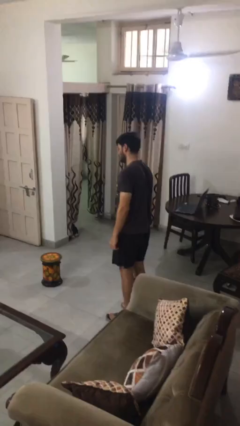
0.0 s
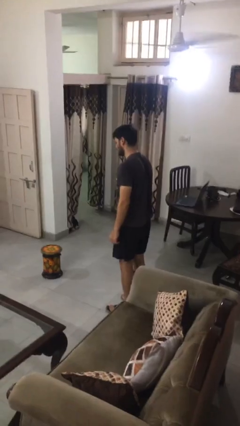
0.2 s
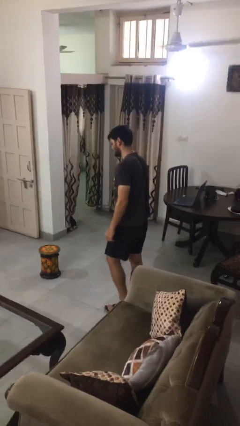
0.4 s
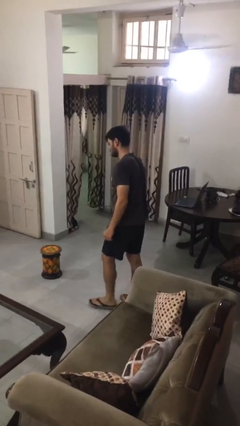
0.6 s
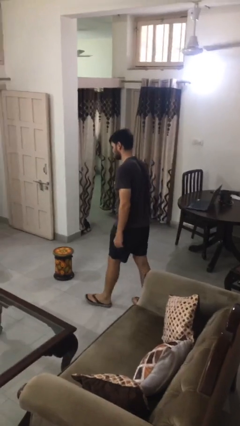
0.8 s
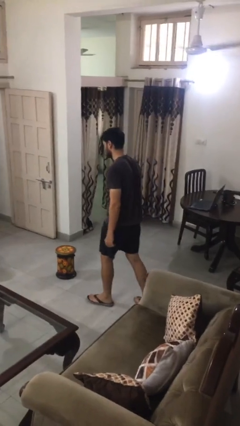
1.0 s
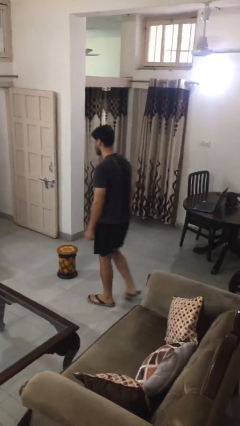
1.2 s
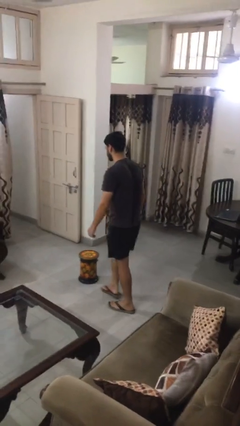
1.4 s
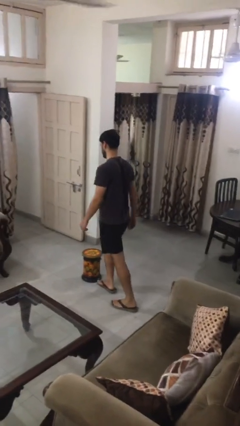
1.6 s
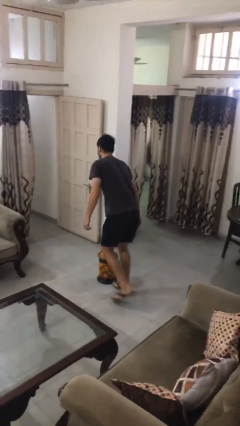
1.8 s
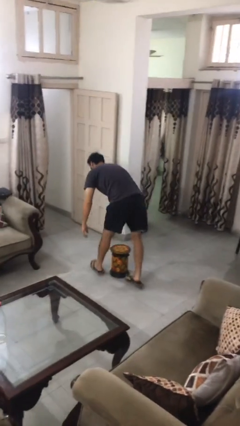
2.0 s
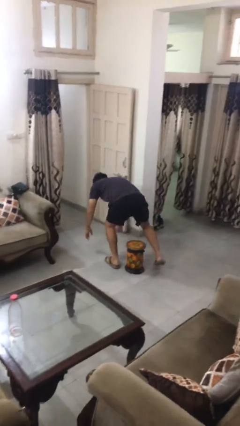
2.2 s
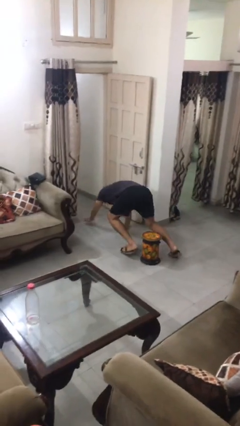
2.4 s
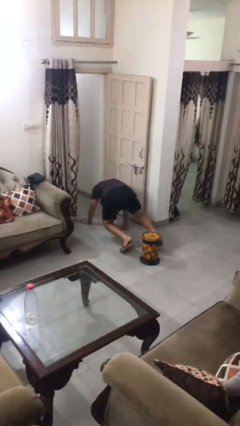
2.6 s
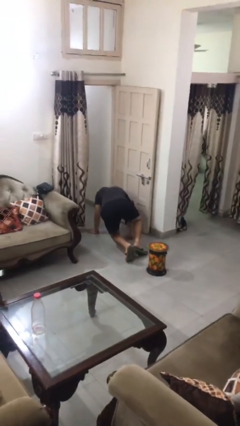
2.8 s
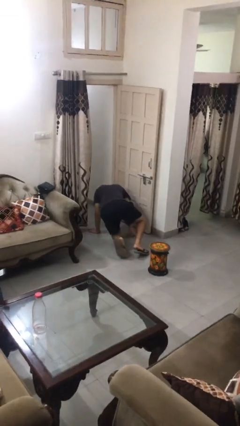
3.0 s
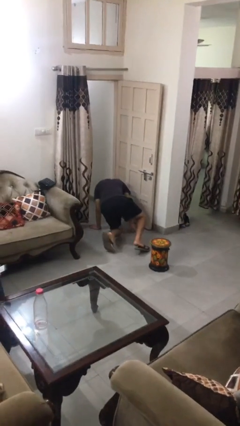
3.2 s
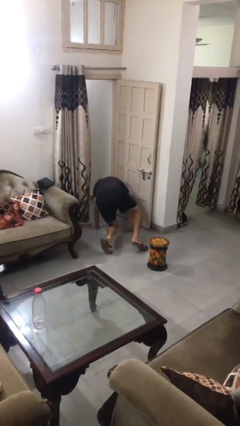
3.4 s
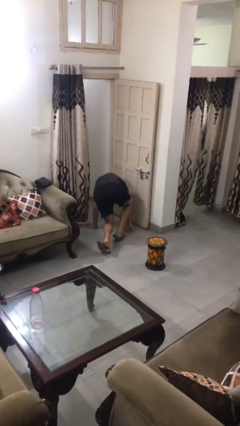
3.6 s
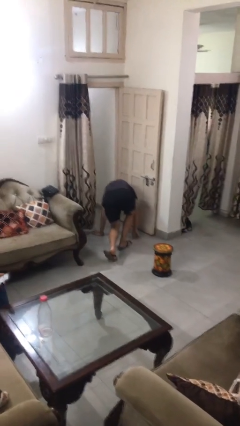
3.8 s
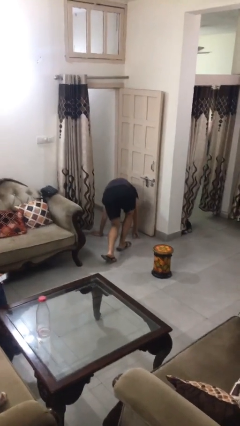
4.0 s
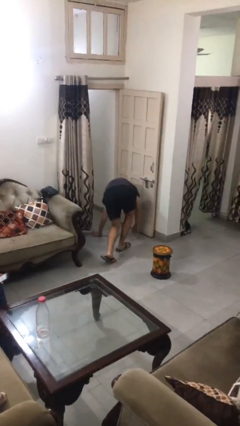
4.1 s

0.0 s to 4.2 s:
person trips on object on floor

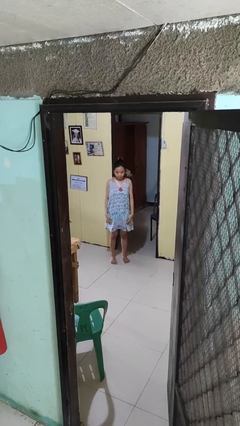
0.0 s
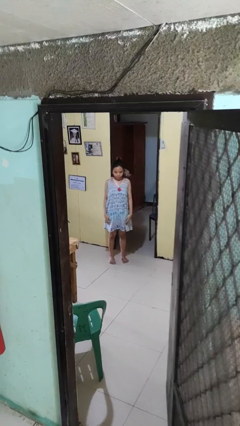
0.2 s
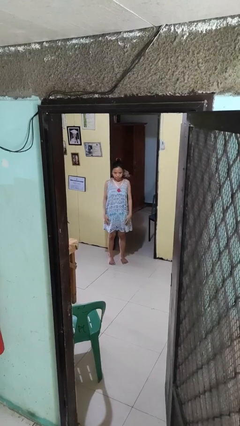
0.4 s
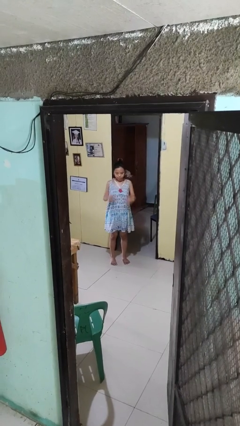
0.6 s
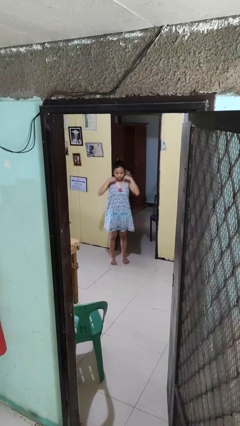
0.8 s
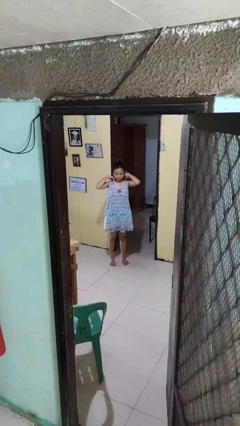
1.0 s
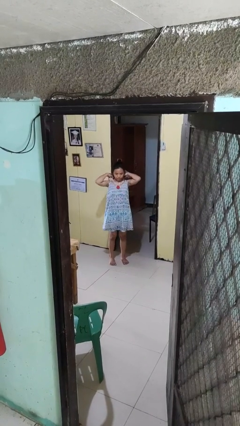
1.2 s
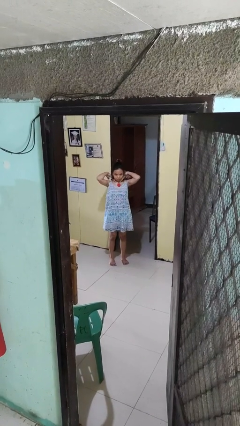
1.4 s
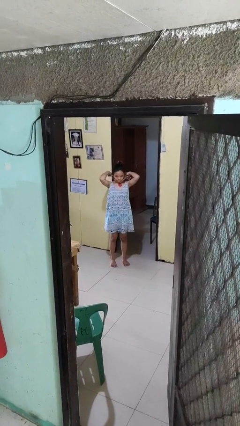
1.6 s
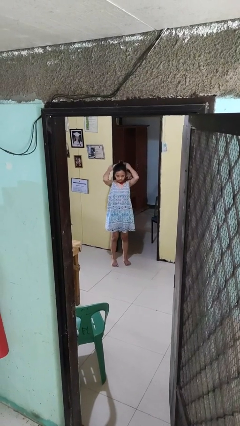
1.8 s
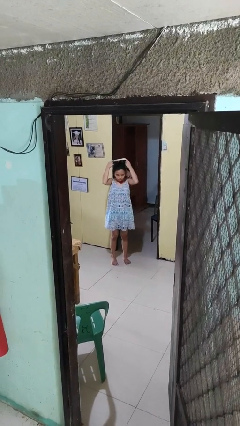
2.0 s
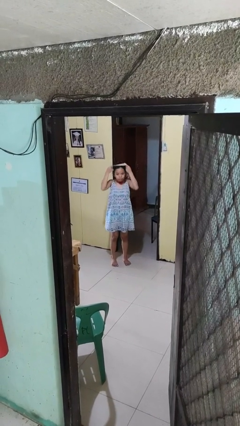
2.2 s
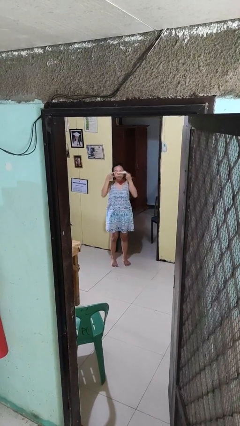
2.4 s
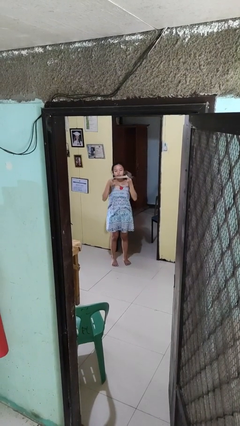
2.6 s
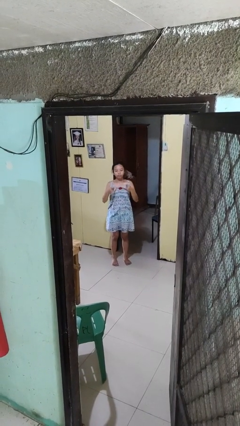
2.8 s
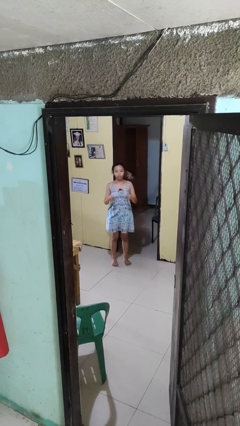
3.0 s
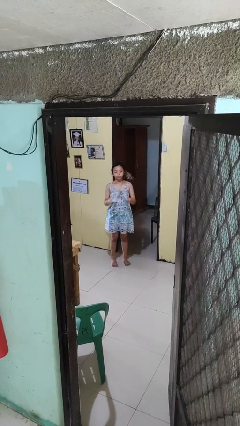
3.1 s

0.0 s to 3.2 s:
person takes off necklace

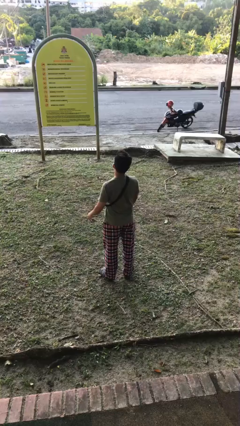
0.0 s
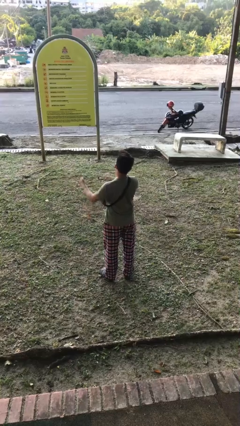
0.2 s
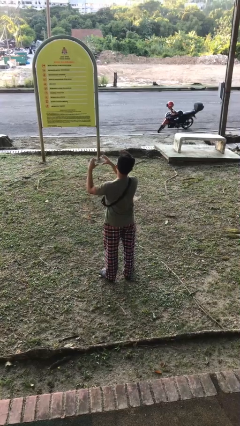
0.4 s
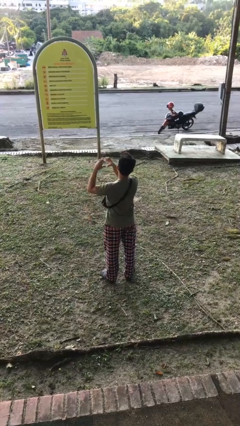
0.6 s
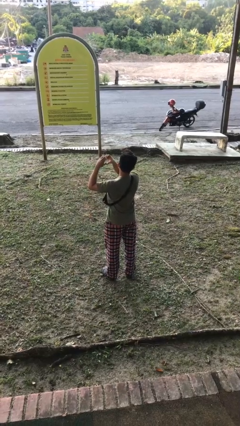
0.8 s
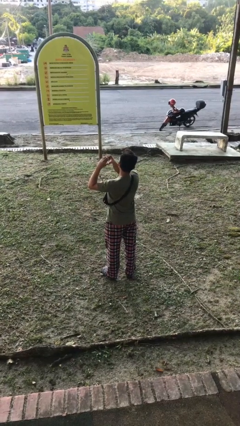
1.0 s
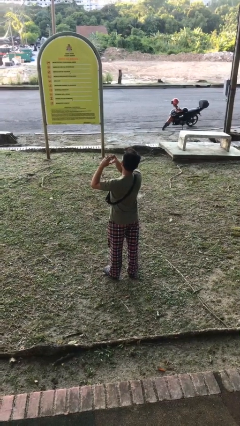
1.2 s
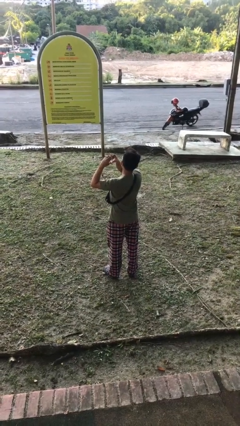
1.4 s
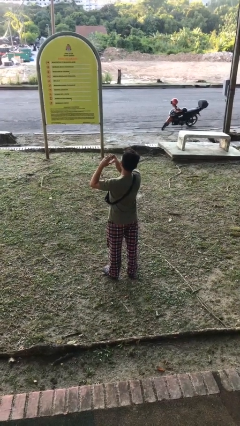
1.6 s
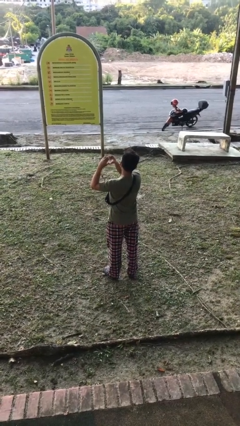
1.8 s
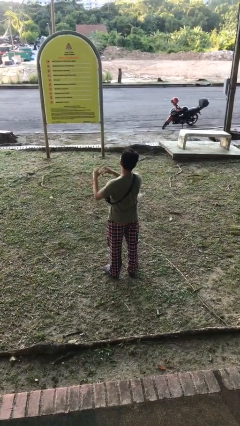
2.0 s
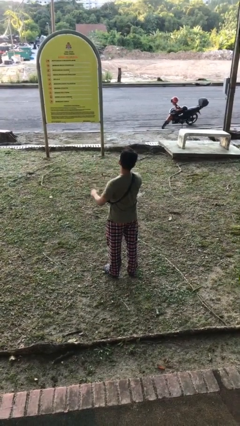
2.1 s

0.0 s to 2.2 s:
person gestures heart

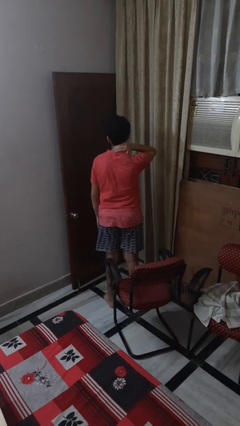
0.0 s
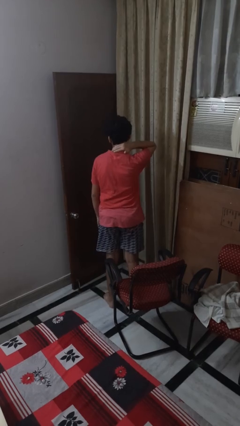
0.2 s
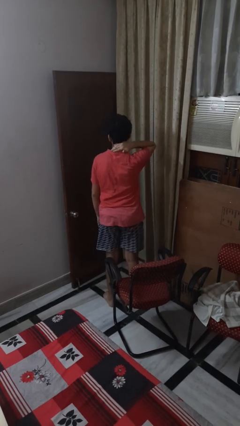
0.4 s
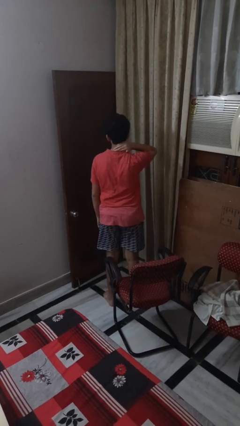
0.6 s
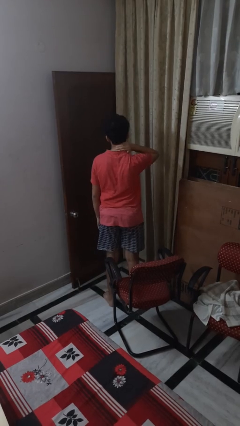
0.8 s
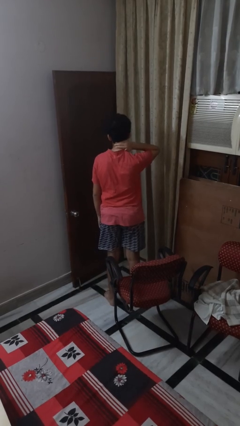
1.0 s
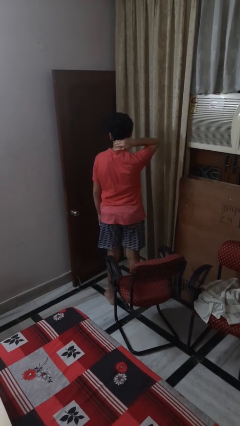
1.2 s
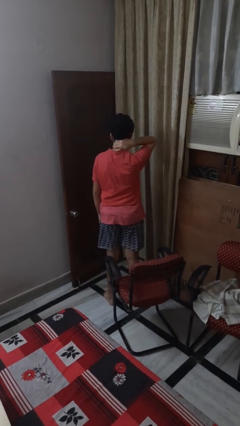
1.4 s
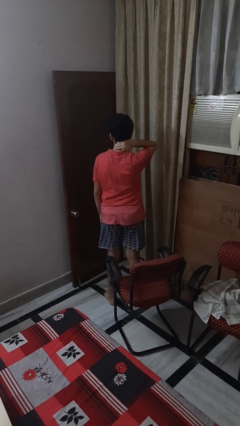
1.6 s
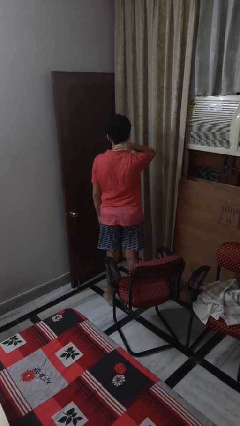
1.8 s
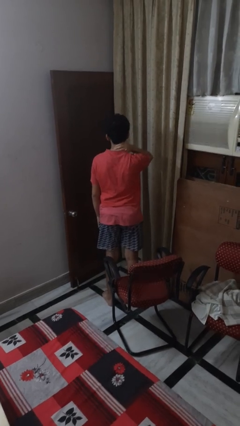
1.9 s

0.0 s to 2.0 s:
person rubs neck

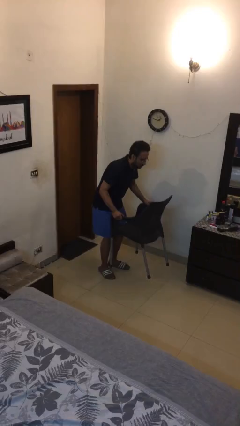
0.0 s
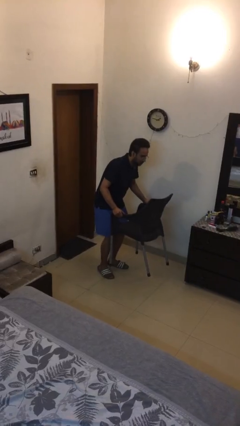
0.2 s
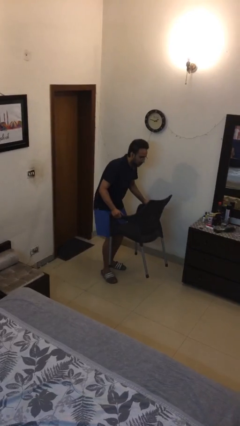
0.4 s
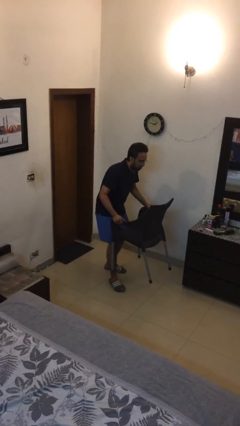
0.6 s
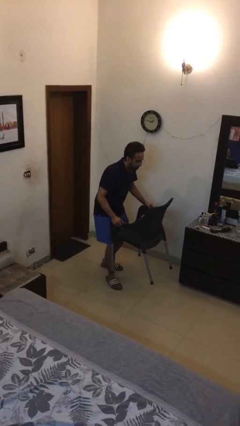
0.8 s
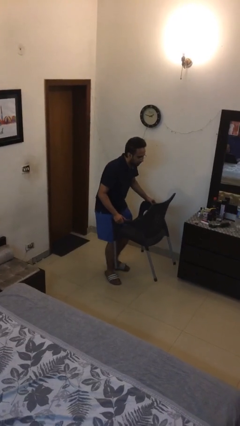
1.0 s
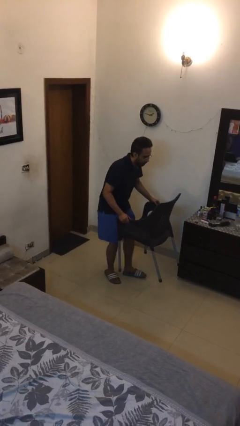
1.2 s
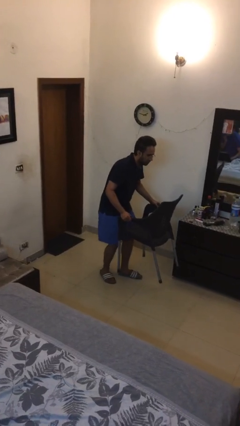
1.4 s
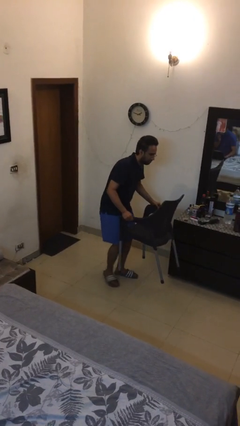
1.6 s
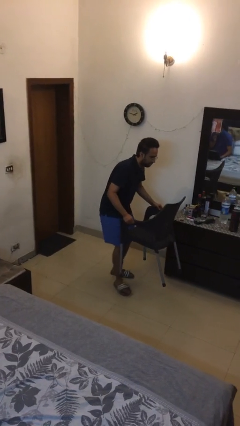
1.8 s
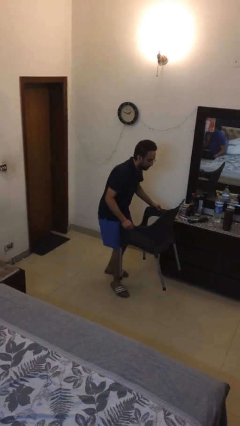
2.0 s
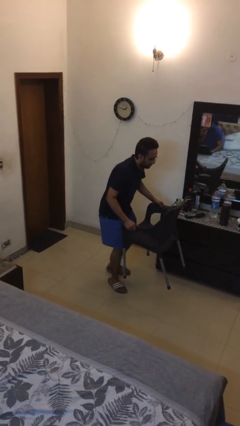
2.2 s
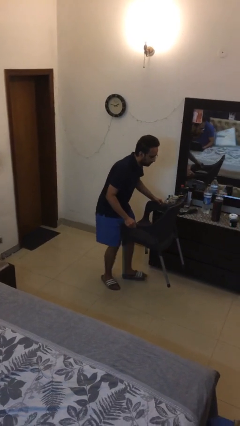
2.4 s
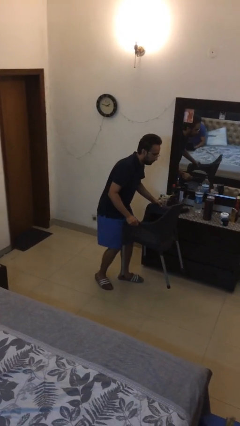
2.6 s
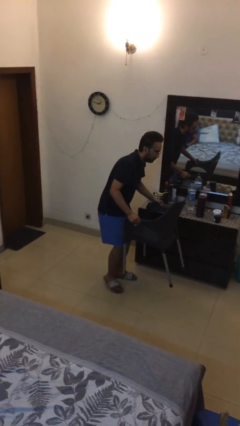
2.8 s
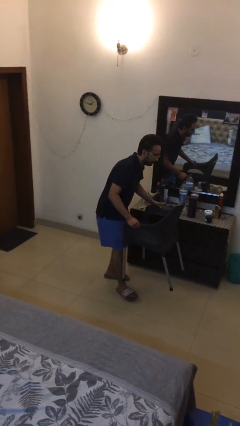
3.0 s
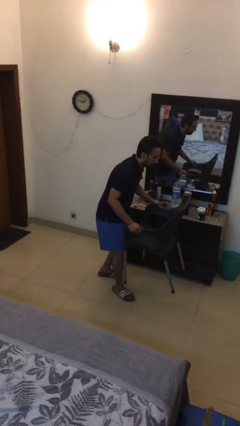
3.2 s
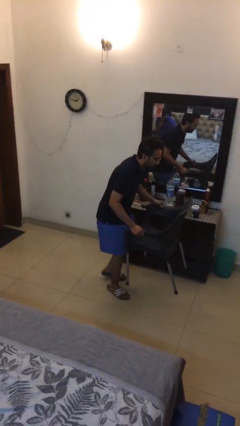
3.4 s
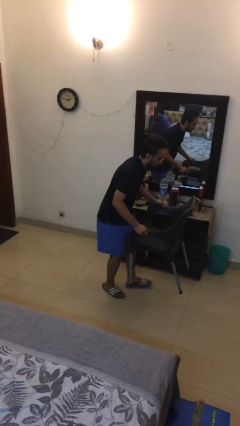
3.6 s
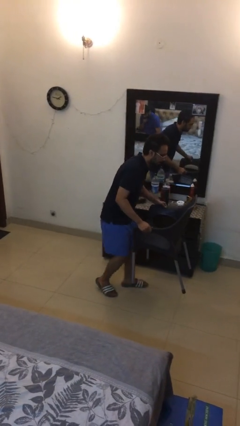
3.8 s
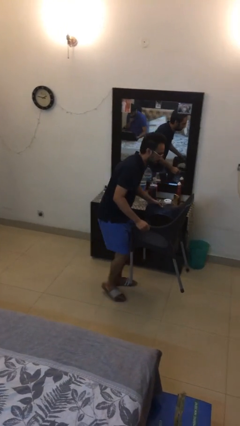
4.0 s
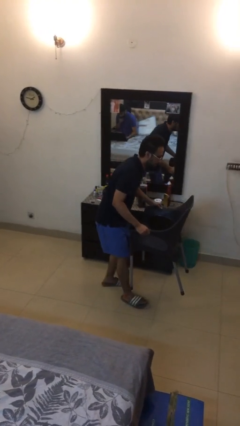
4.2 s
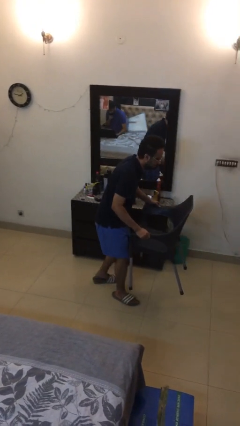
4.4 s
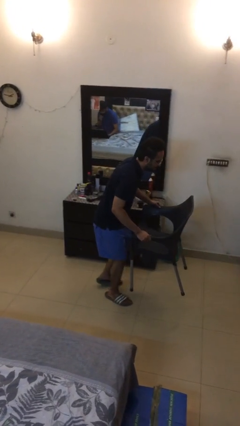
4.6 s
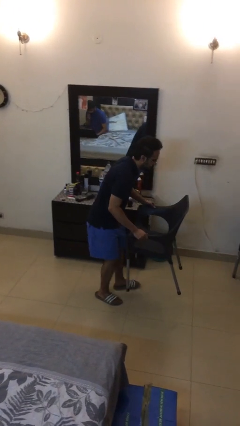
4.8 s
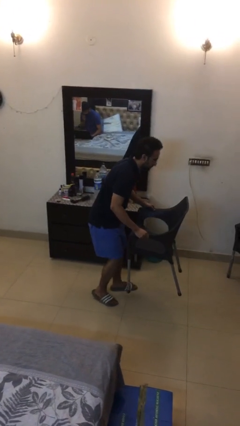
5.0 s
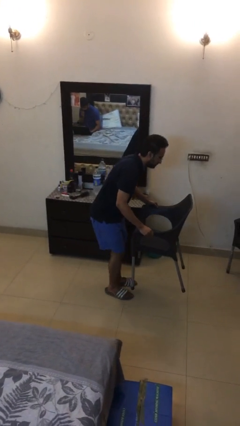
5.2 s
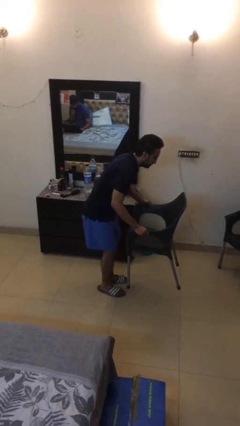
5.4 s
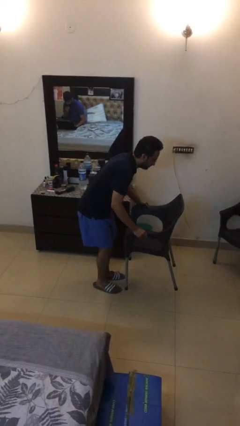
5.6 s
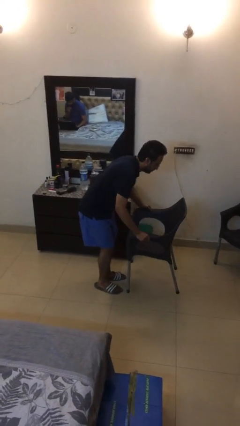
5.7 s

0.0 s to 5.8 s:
person carries heavy object

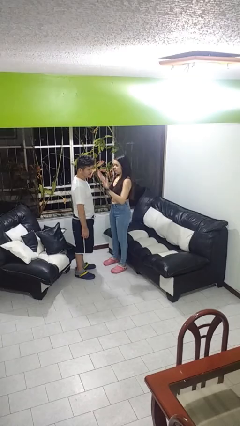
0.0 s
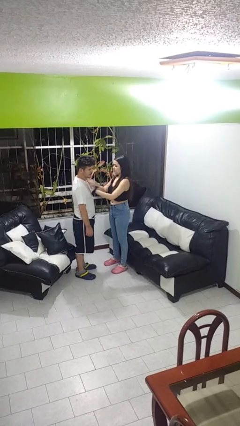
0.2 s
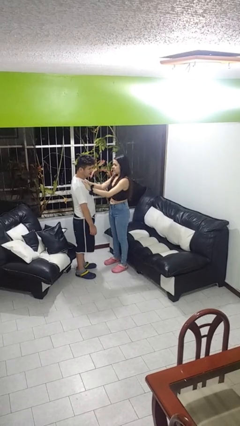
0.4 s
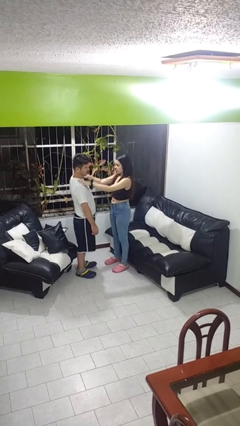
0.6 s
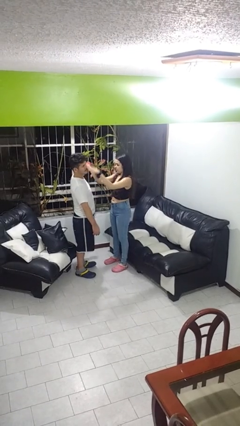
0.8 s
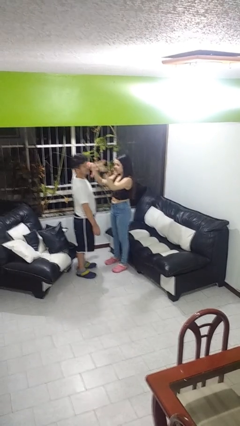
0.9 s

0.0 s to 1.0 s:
person shoves person
